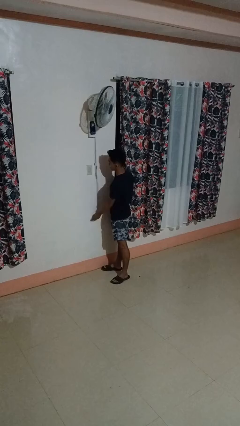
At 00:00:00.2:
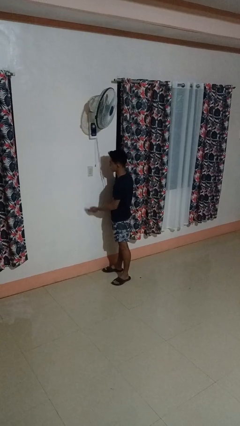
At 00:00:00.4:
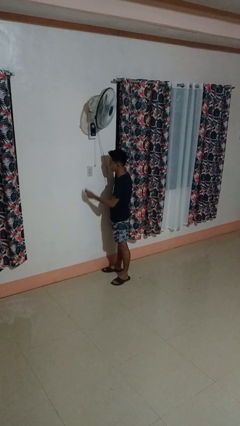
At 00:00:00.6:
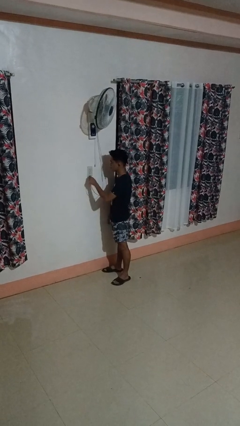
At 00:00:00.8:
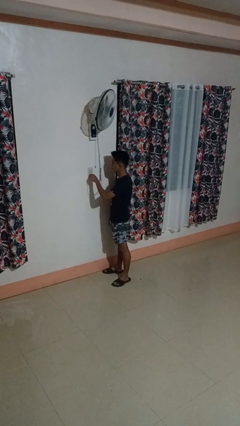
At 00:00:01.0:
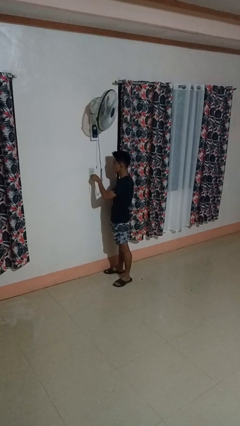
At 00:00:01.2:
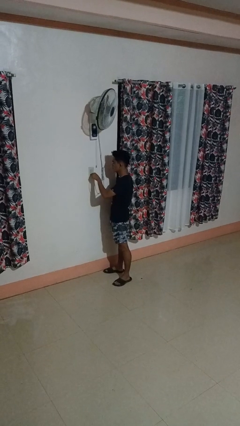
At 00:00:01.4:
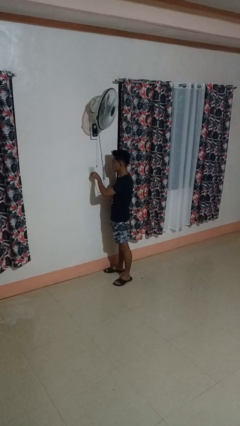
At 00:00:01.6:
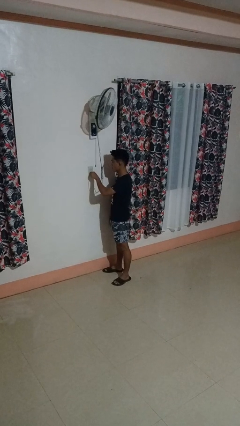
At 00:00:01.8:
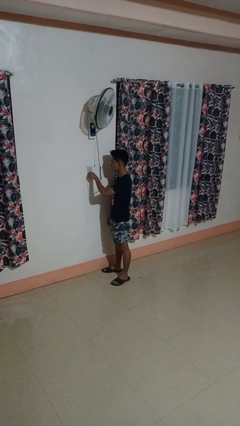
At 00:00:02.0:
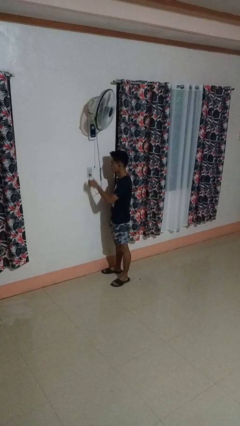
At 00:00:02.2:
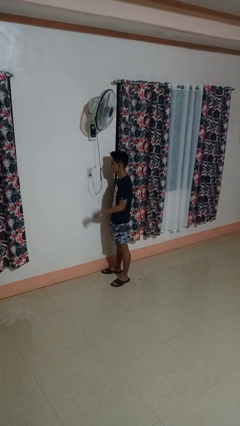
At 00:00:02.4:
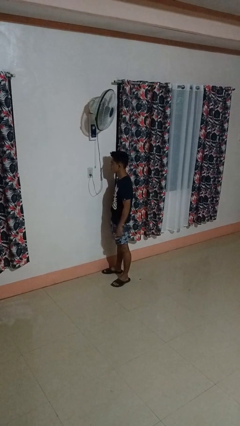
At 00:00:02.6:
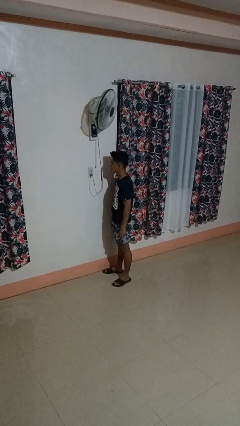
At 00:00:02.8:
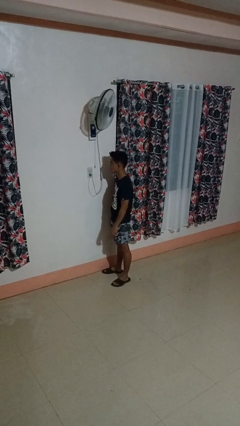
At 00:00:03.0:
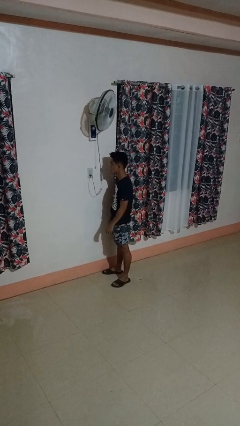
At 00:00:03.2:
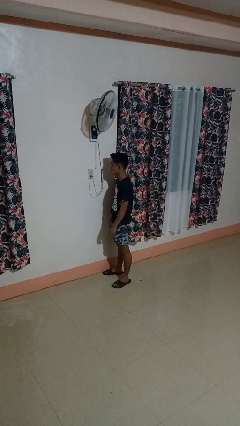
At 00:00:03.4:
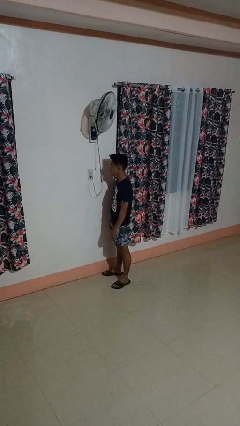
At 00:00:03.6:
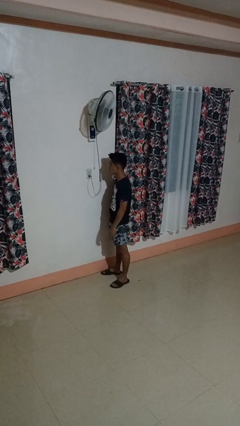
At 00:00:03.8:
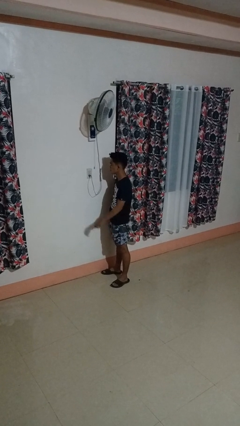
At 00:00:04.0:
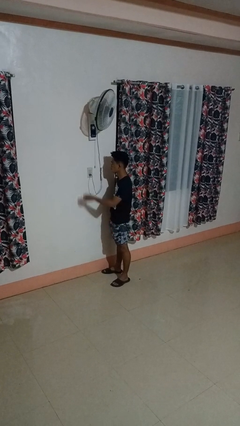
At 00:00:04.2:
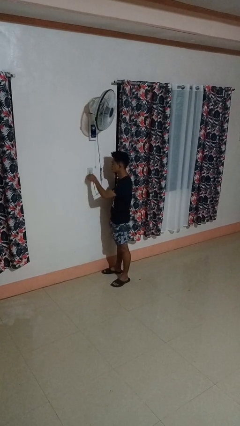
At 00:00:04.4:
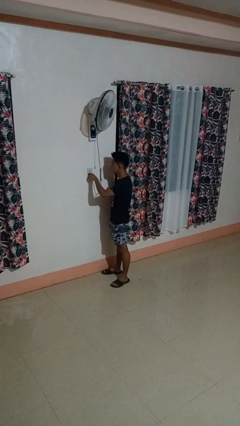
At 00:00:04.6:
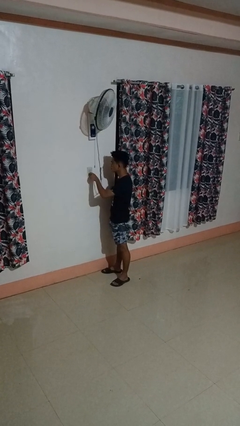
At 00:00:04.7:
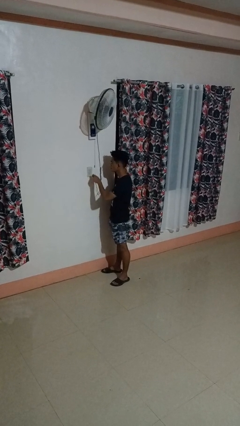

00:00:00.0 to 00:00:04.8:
person plugs into electrical socket

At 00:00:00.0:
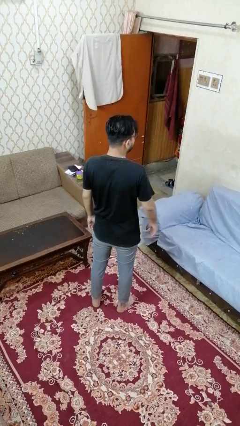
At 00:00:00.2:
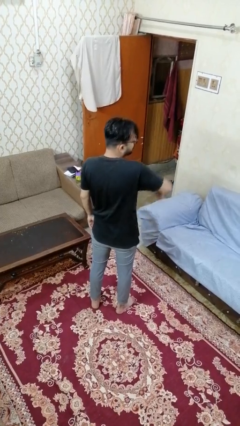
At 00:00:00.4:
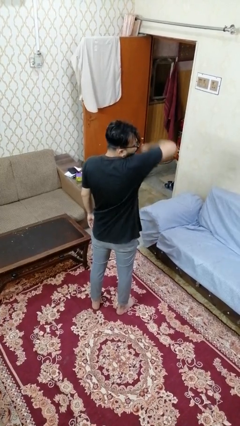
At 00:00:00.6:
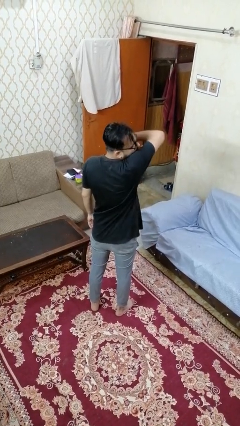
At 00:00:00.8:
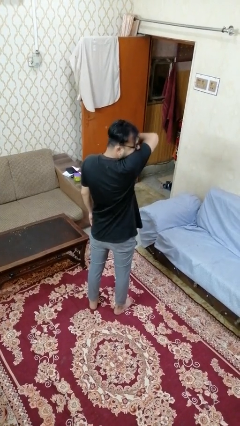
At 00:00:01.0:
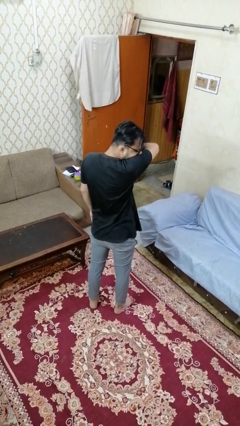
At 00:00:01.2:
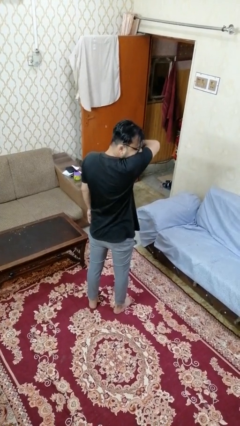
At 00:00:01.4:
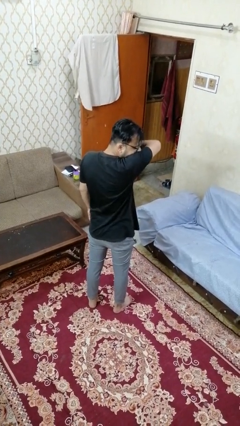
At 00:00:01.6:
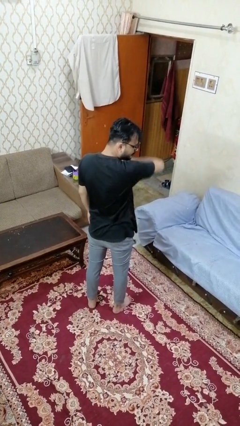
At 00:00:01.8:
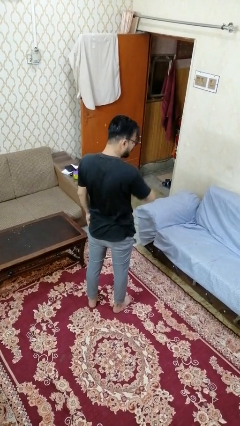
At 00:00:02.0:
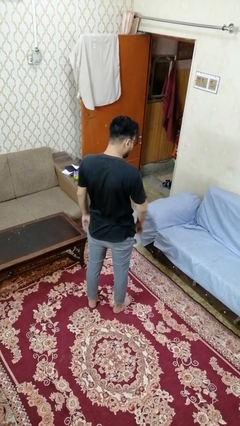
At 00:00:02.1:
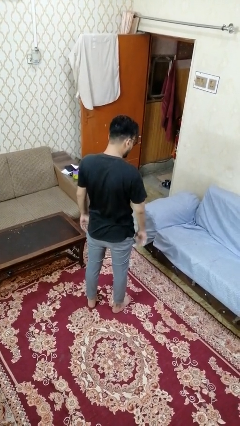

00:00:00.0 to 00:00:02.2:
person sneezes into arm

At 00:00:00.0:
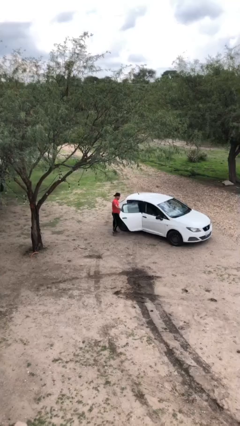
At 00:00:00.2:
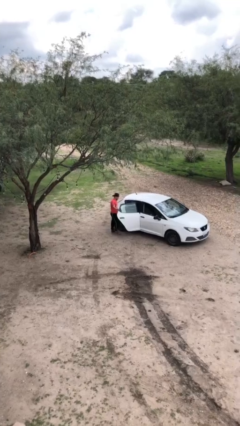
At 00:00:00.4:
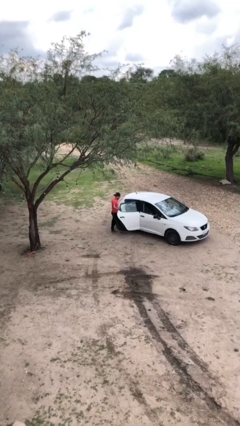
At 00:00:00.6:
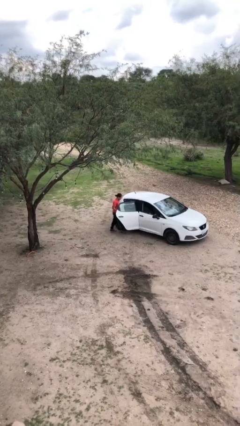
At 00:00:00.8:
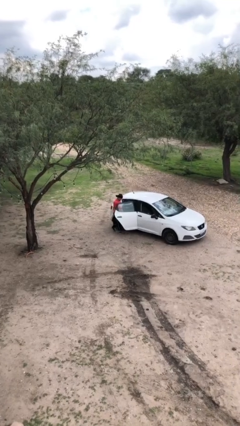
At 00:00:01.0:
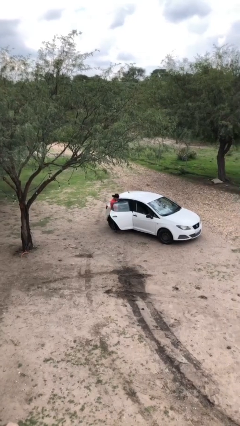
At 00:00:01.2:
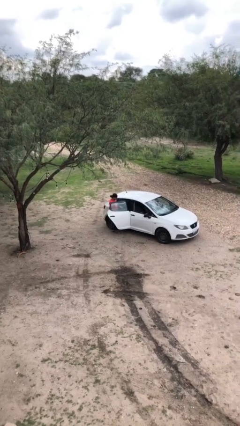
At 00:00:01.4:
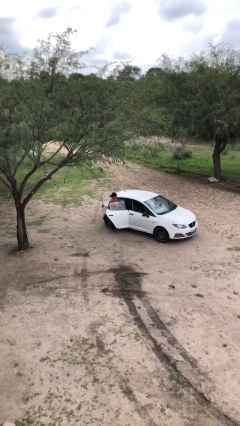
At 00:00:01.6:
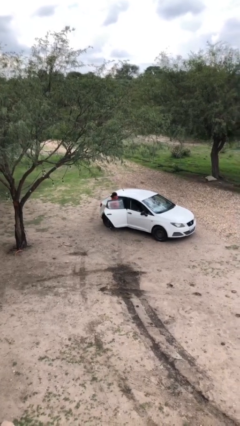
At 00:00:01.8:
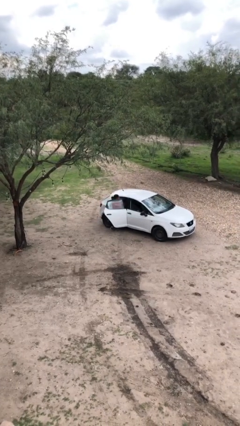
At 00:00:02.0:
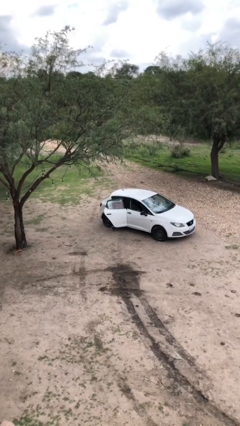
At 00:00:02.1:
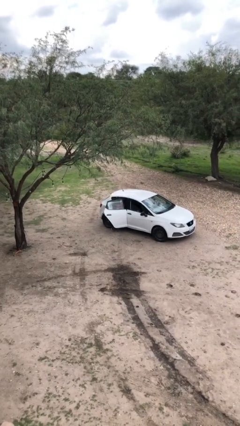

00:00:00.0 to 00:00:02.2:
person enters car

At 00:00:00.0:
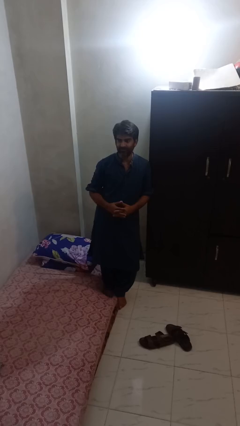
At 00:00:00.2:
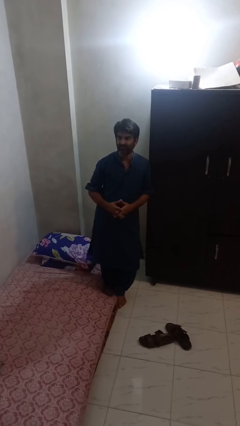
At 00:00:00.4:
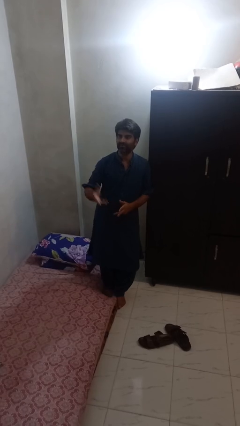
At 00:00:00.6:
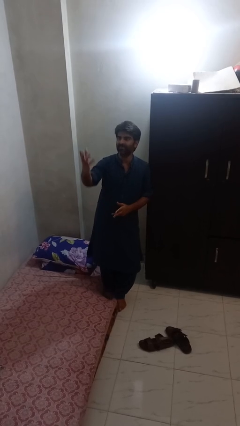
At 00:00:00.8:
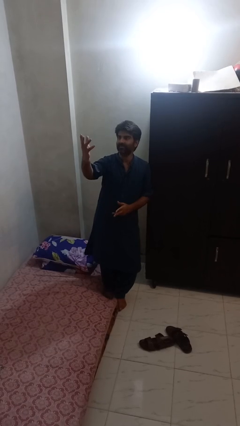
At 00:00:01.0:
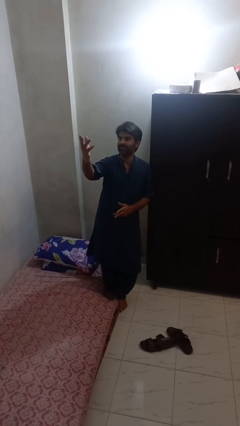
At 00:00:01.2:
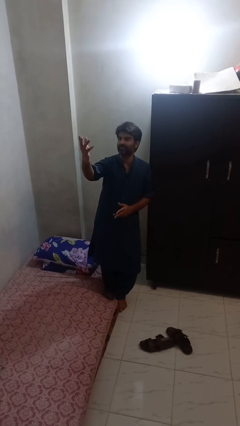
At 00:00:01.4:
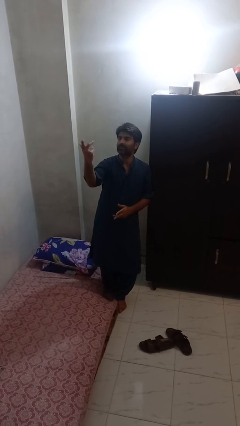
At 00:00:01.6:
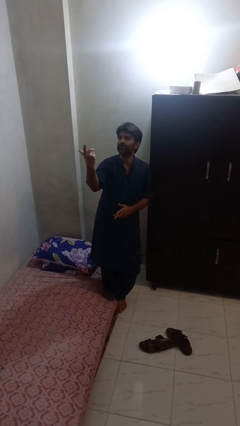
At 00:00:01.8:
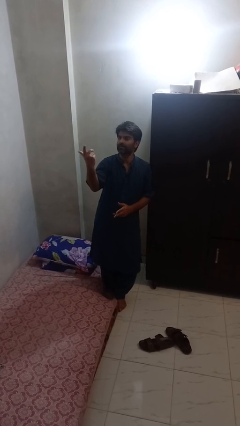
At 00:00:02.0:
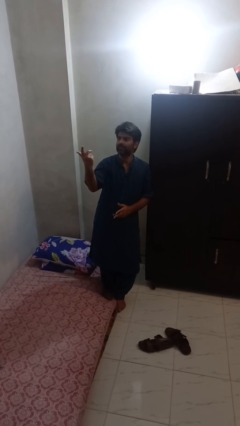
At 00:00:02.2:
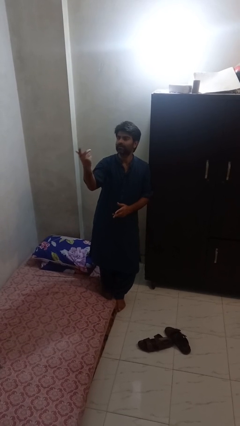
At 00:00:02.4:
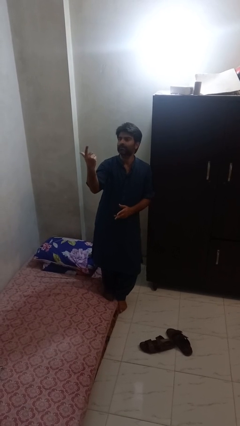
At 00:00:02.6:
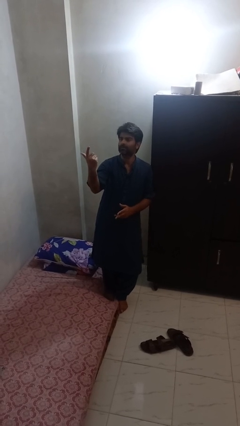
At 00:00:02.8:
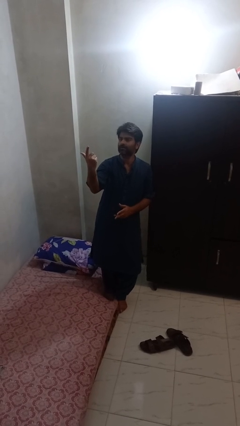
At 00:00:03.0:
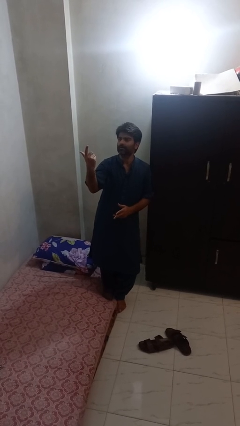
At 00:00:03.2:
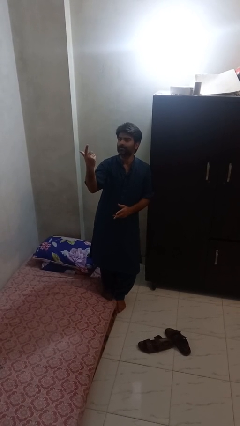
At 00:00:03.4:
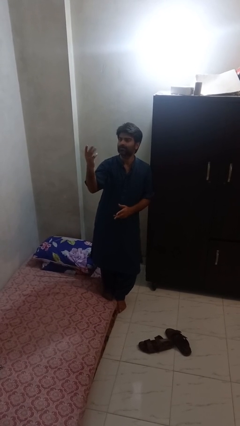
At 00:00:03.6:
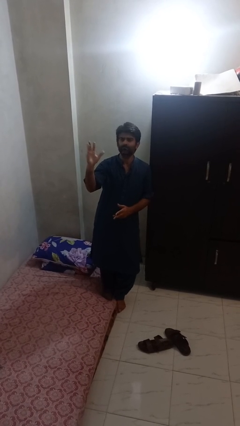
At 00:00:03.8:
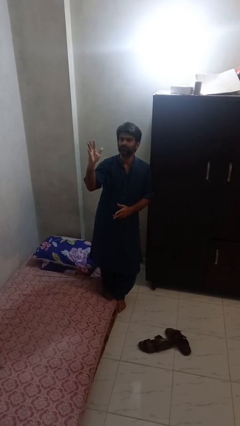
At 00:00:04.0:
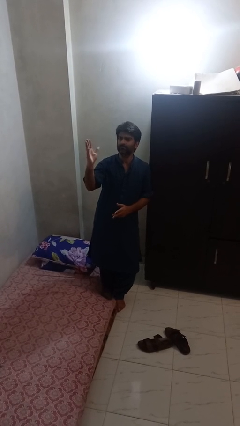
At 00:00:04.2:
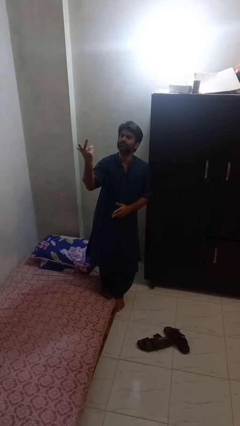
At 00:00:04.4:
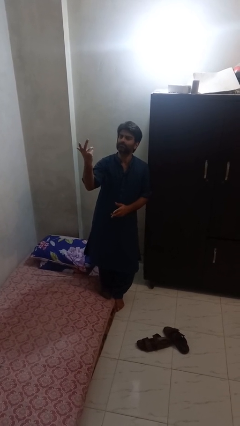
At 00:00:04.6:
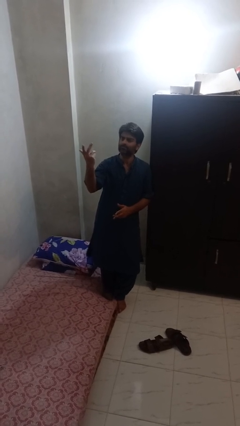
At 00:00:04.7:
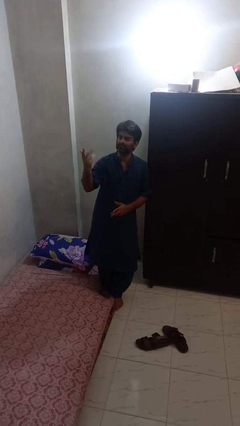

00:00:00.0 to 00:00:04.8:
person gestures raise hand

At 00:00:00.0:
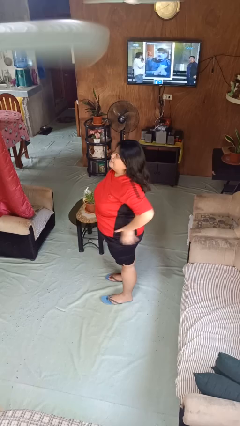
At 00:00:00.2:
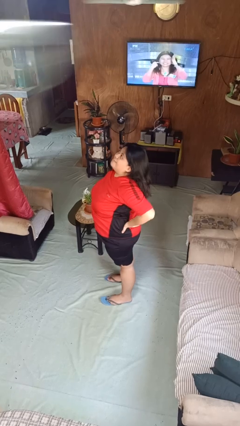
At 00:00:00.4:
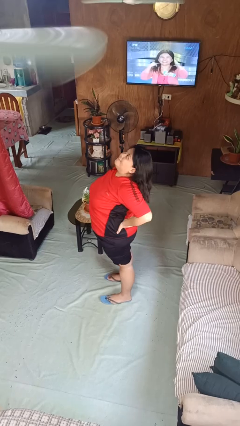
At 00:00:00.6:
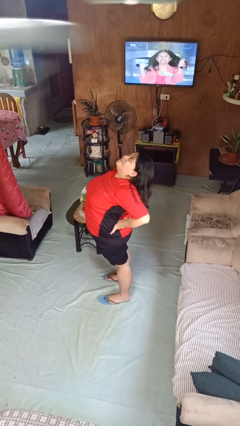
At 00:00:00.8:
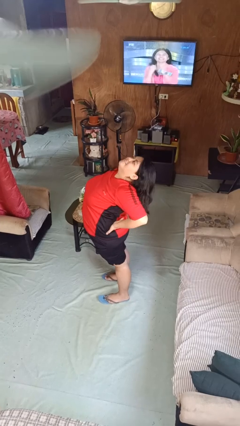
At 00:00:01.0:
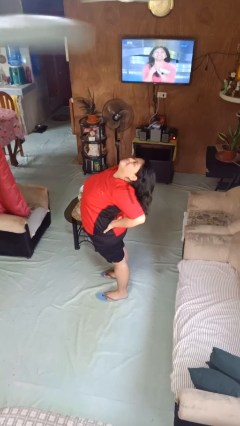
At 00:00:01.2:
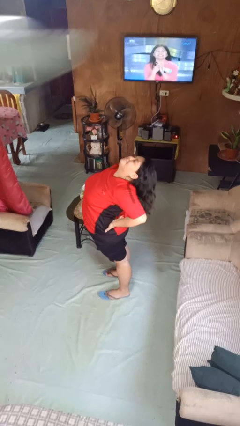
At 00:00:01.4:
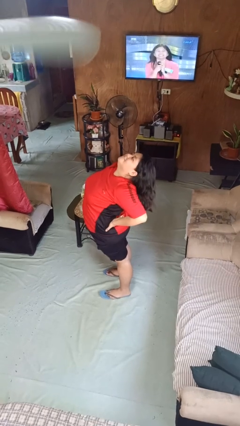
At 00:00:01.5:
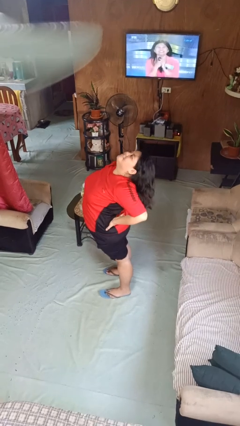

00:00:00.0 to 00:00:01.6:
person stretches back

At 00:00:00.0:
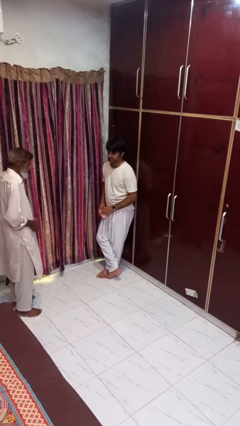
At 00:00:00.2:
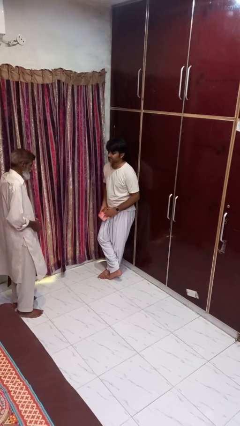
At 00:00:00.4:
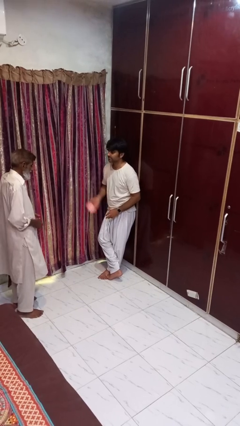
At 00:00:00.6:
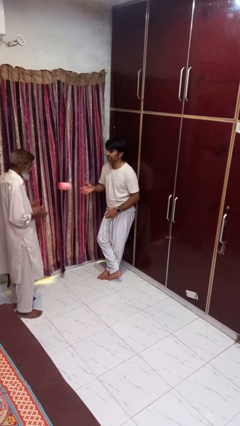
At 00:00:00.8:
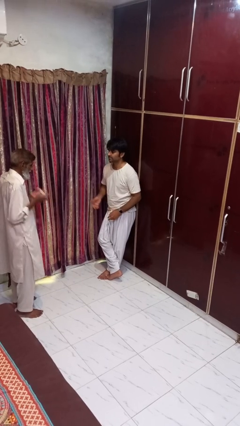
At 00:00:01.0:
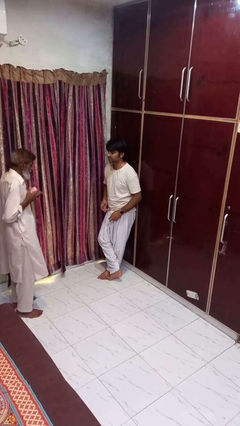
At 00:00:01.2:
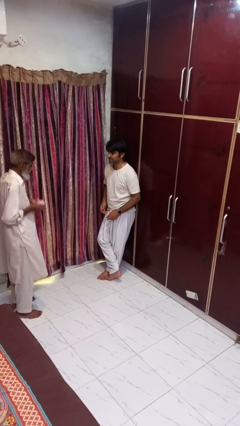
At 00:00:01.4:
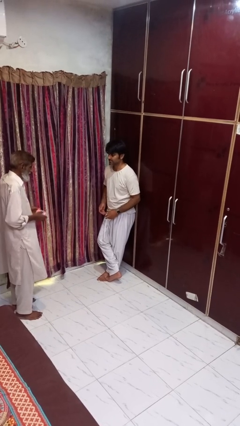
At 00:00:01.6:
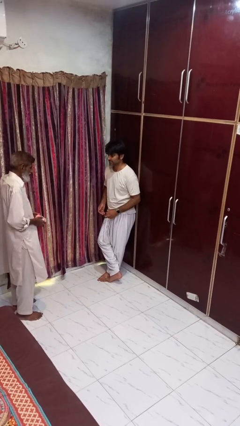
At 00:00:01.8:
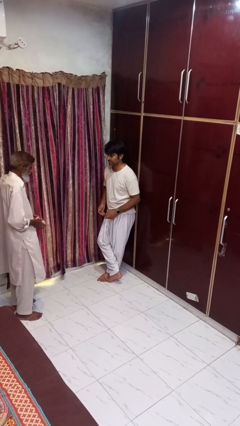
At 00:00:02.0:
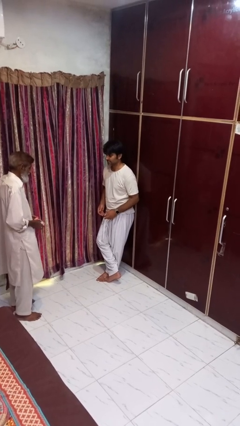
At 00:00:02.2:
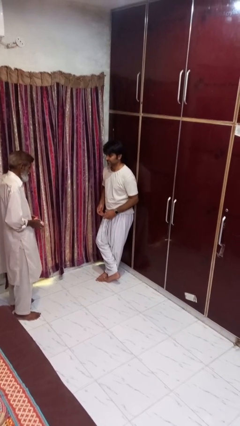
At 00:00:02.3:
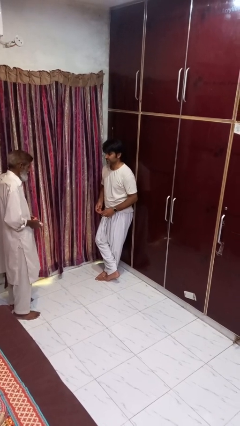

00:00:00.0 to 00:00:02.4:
person throws object to person
